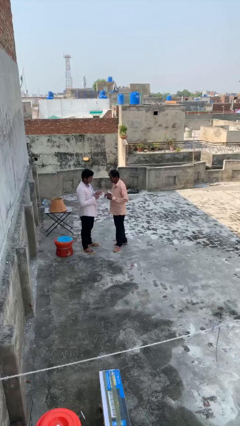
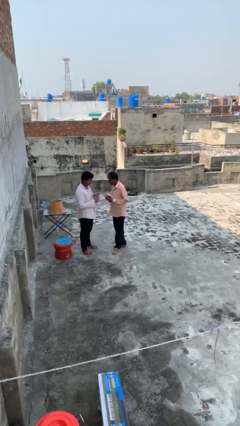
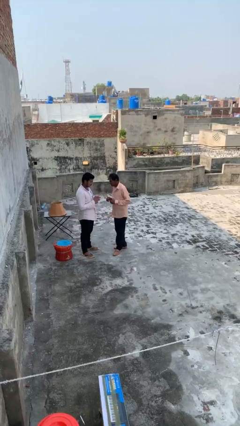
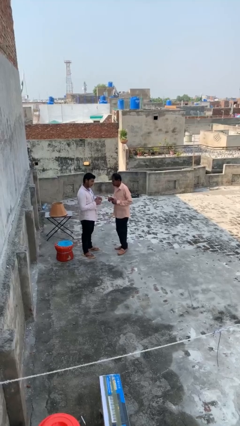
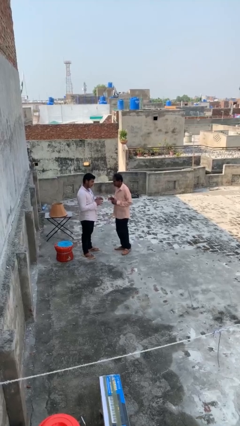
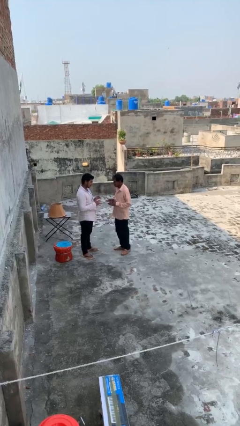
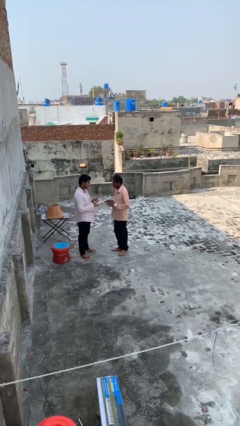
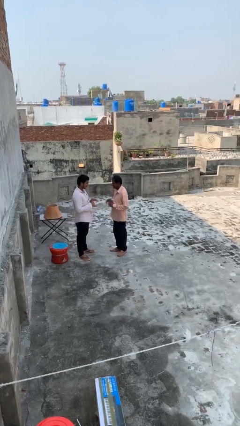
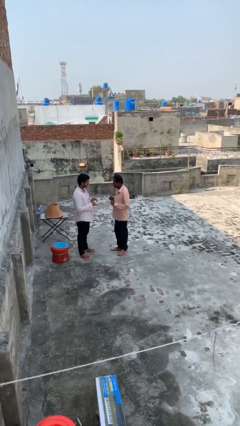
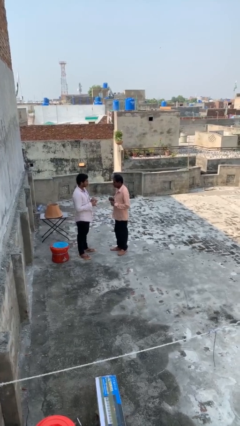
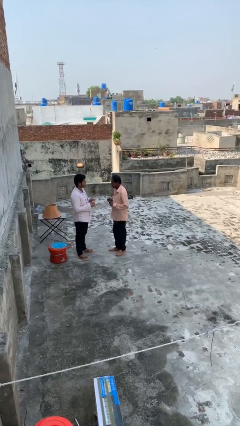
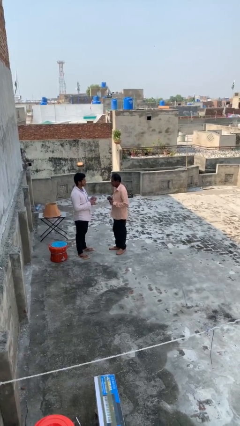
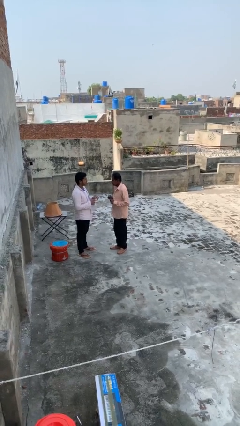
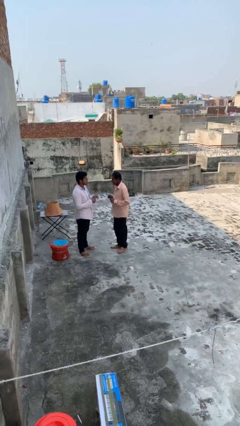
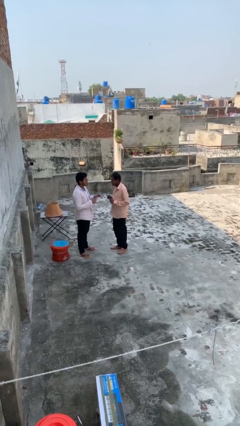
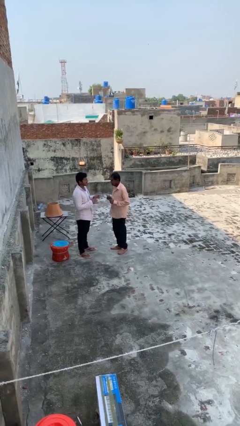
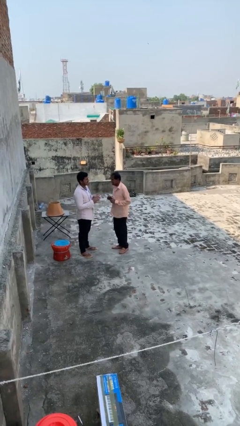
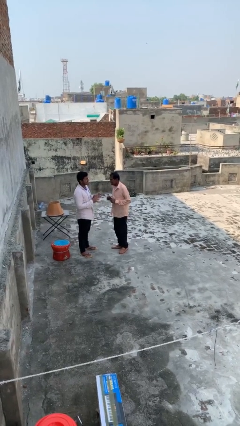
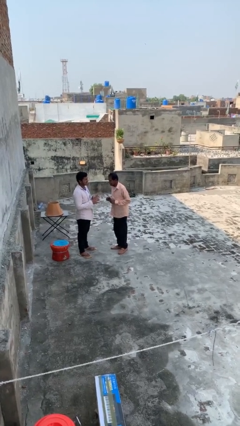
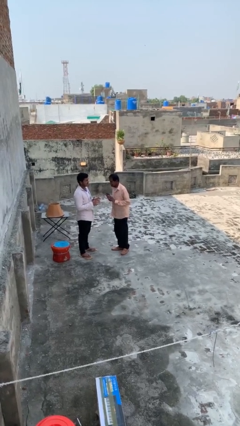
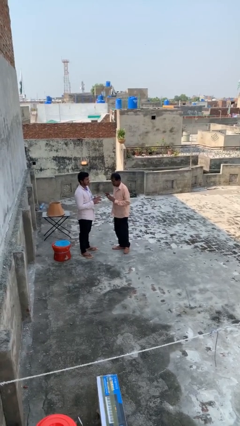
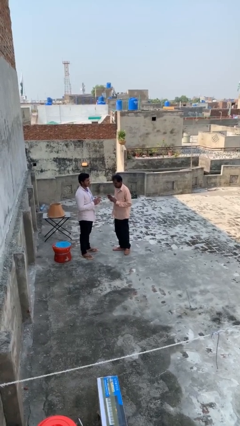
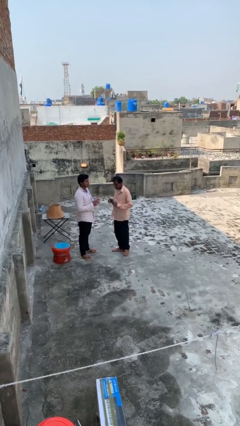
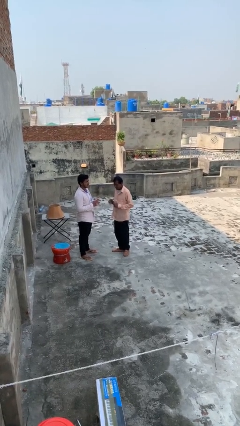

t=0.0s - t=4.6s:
person talks to person

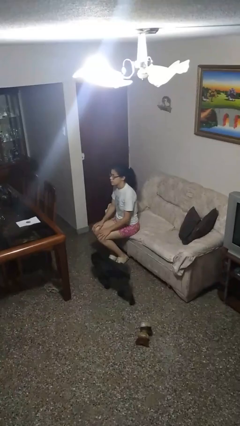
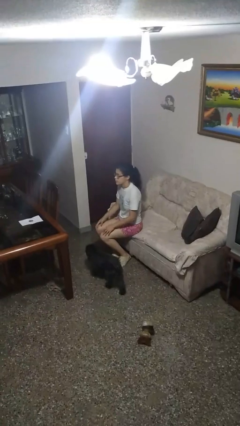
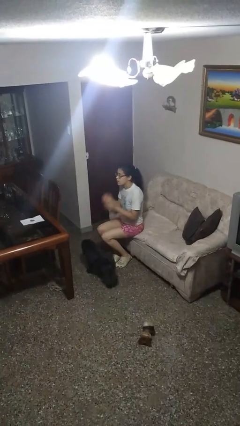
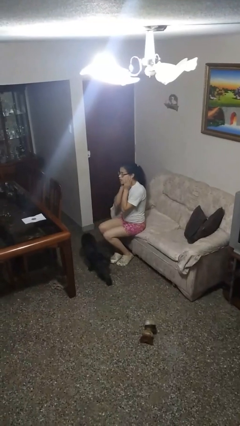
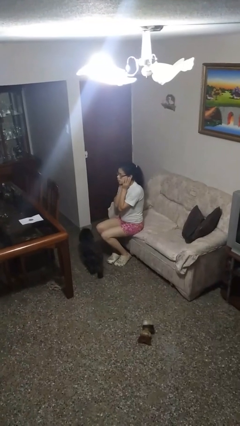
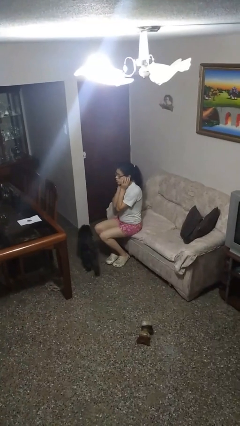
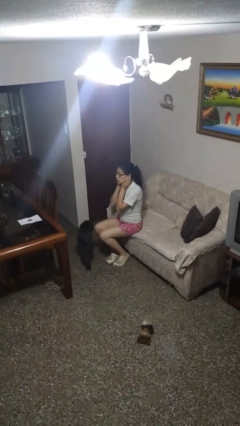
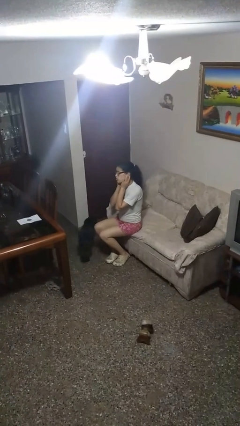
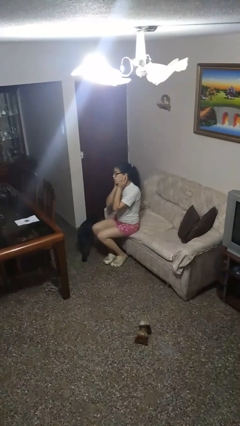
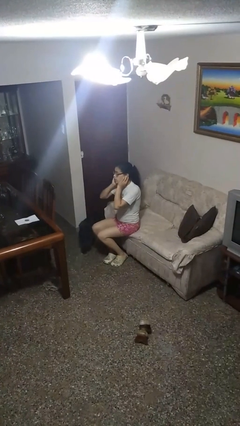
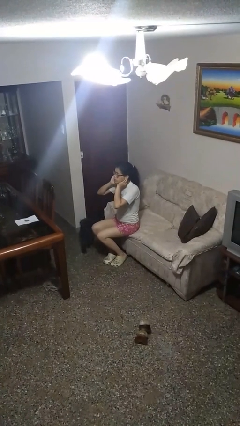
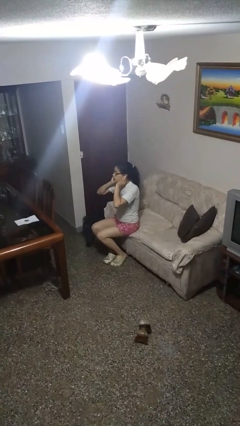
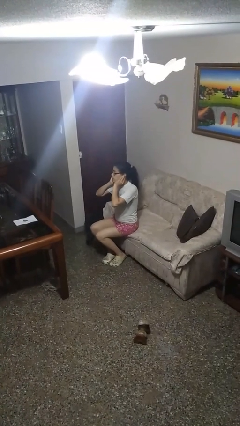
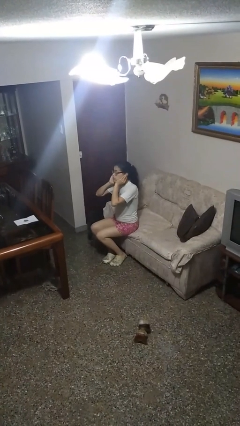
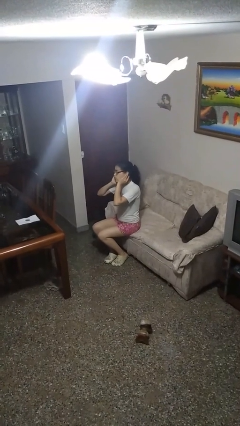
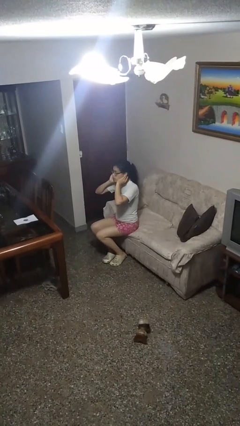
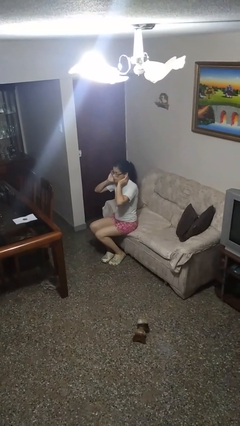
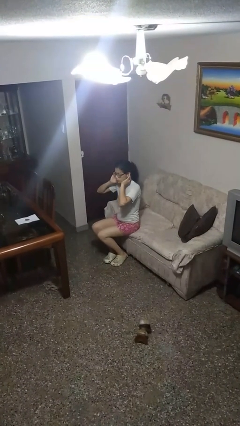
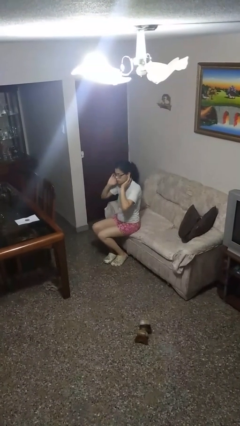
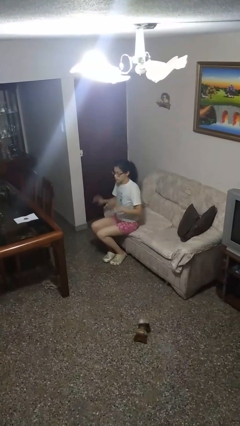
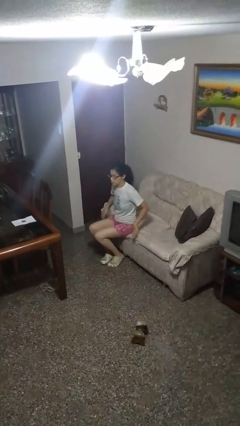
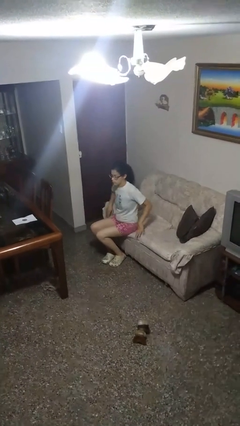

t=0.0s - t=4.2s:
person puts fingers in ear

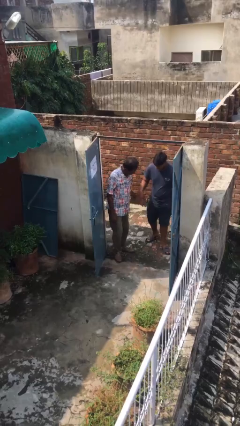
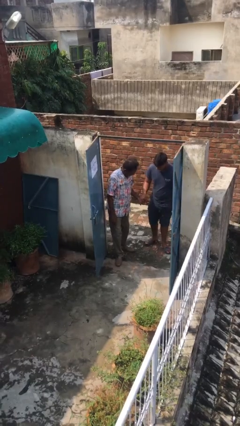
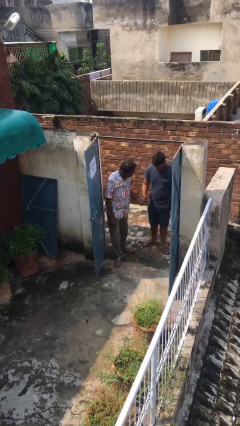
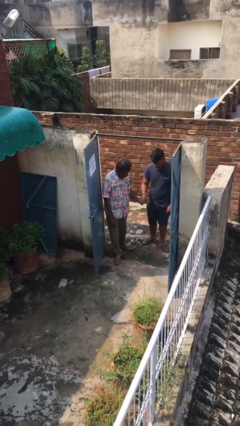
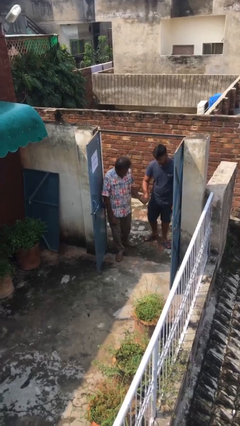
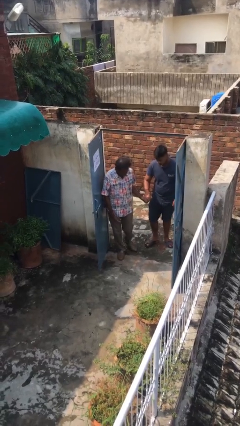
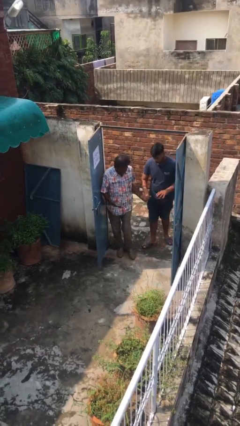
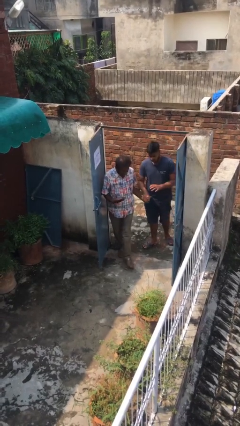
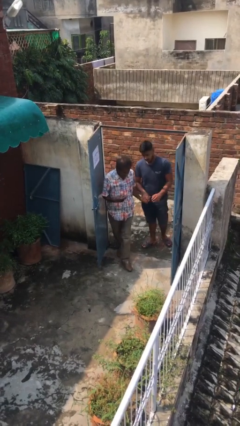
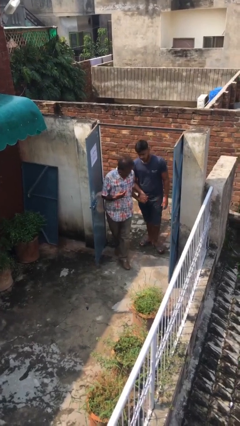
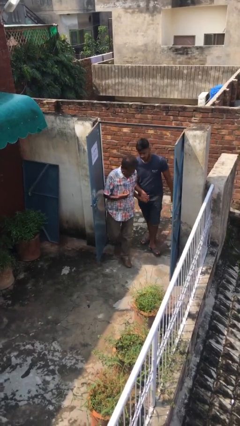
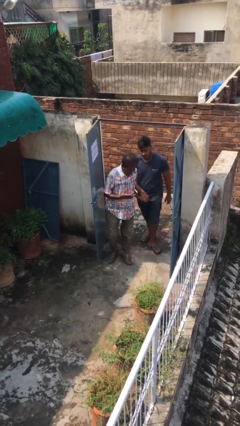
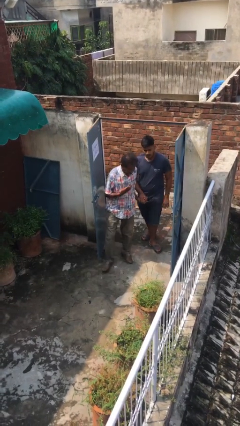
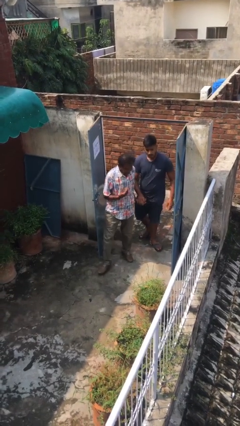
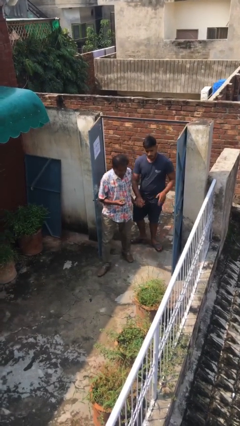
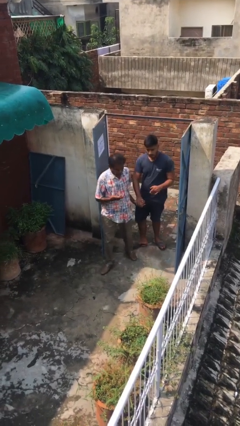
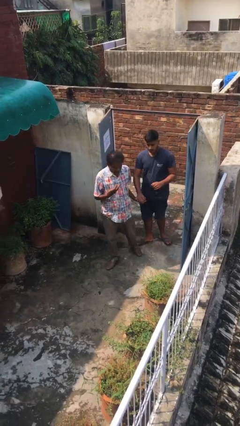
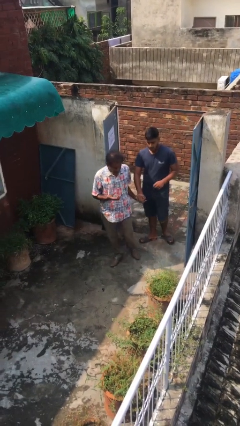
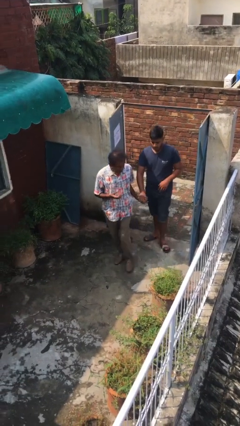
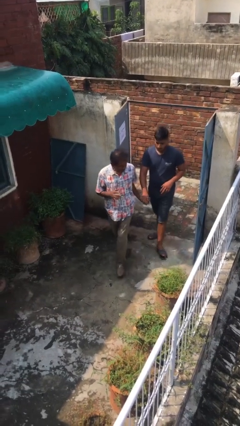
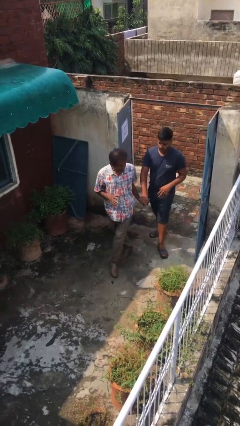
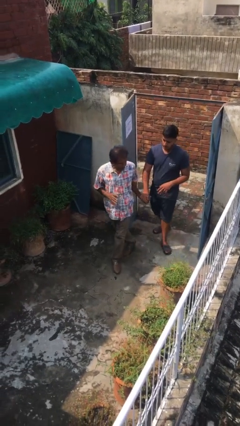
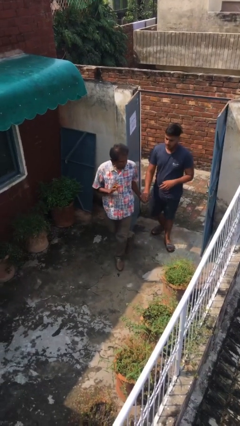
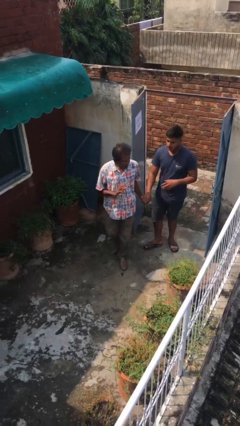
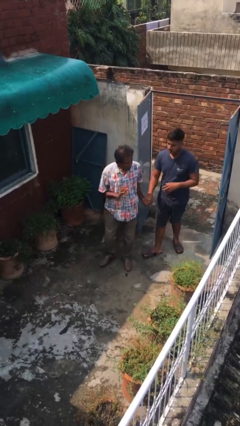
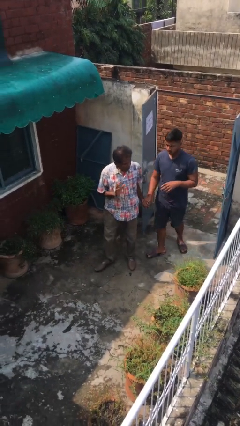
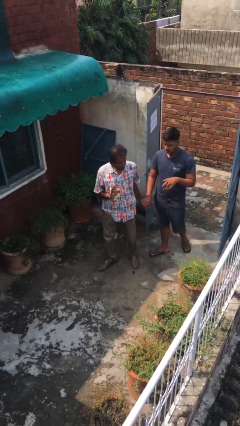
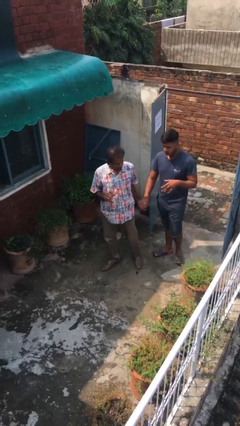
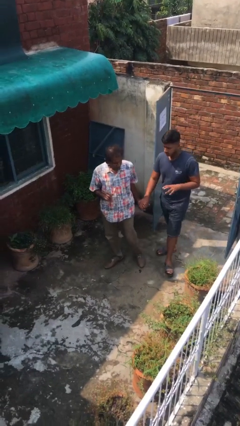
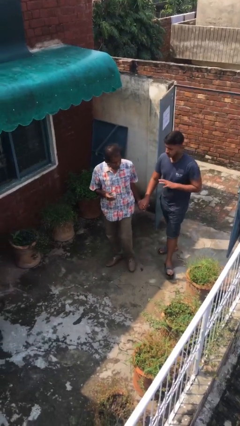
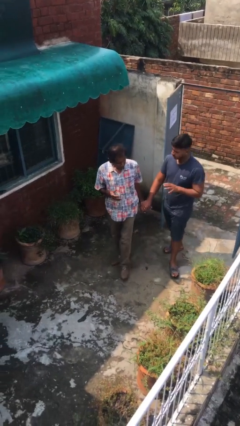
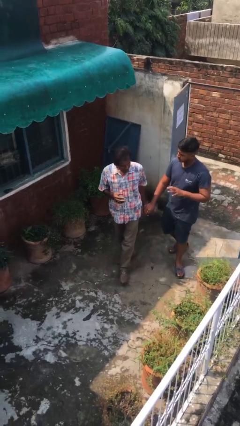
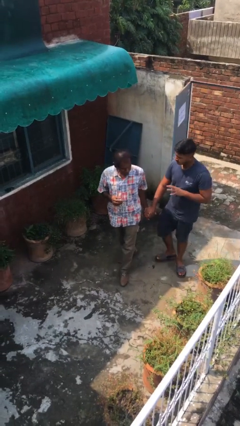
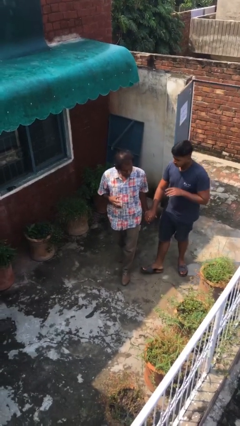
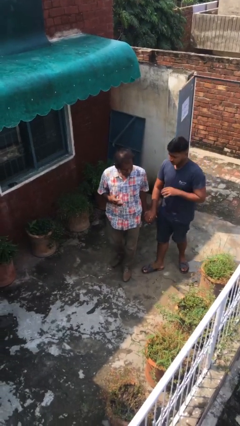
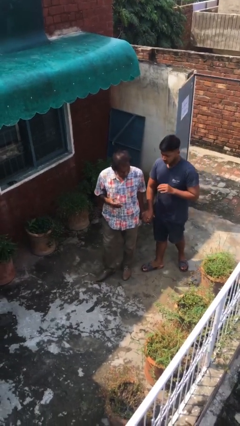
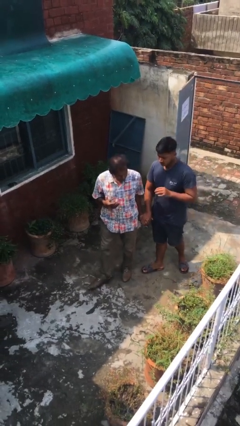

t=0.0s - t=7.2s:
person holds hand

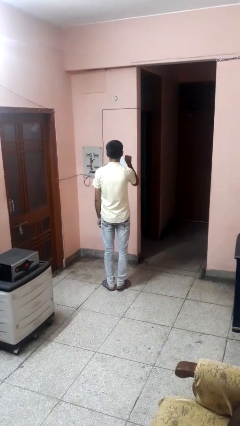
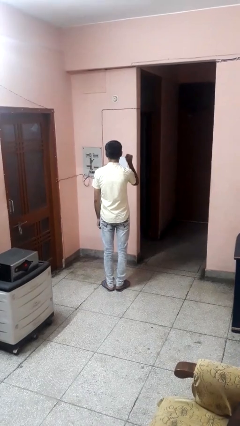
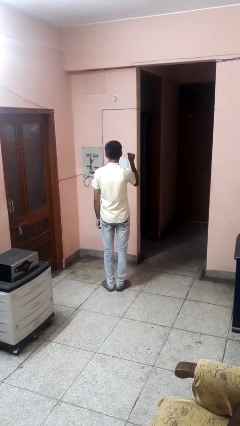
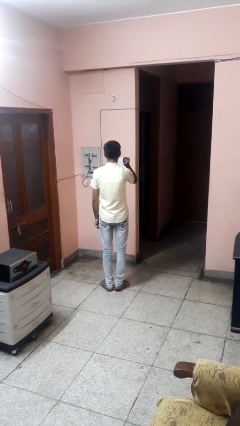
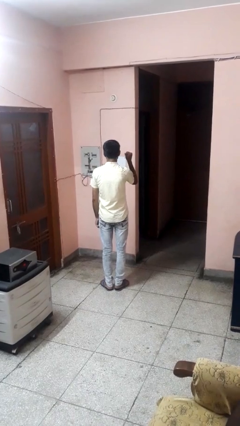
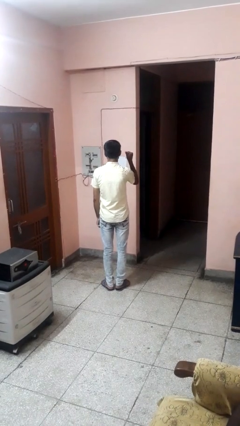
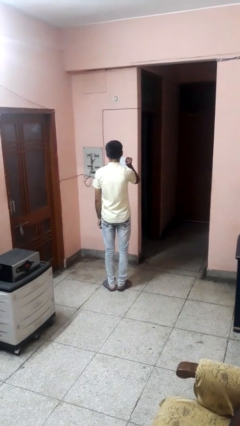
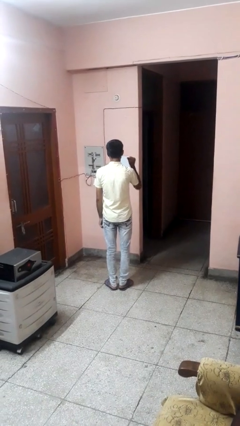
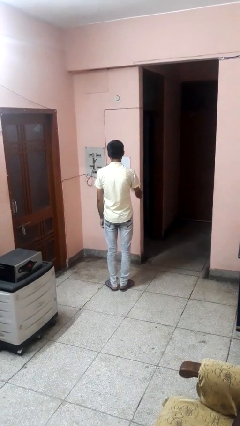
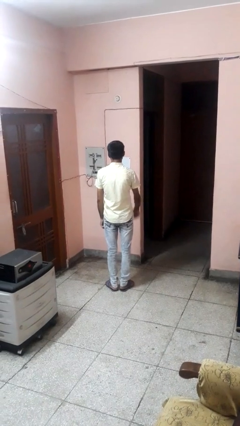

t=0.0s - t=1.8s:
person gestures behind me

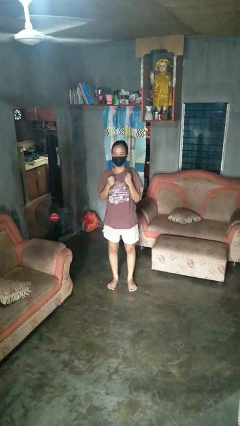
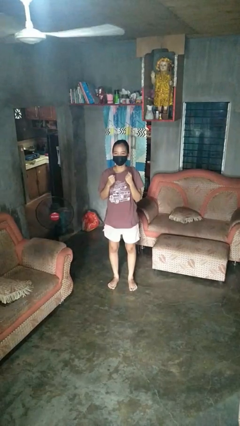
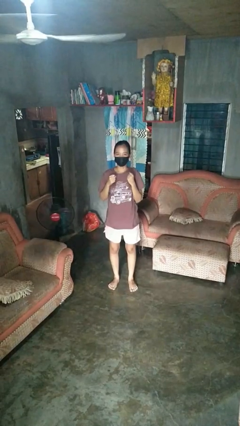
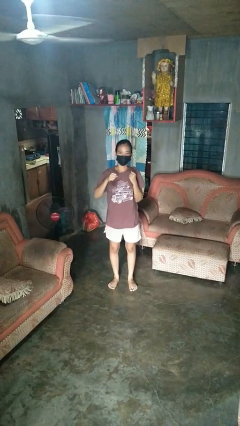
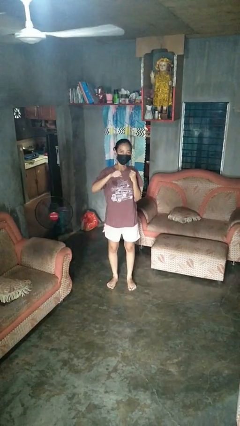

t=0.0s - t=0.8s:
person punches
